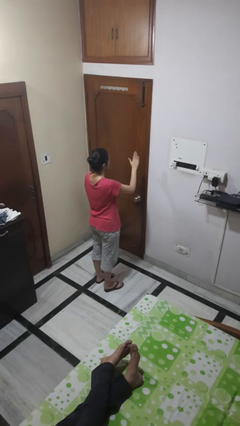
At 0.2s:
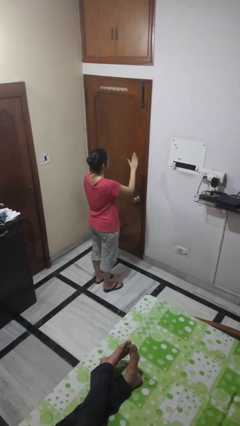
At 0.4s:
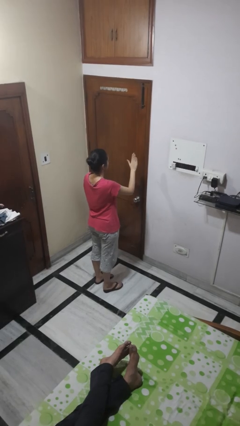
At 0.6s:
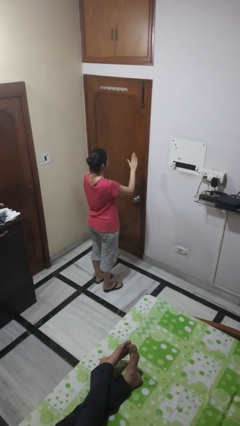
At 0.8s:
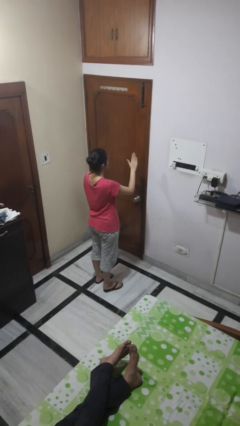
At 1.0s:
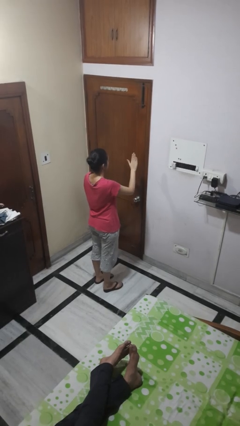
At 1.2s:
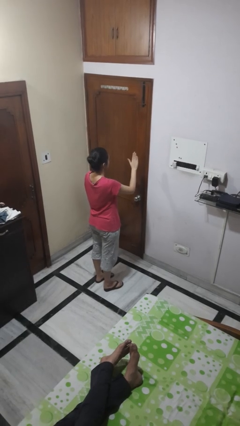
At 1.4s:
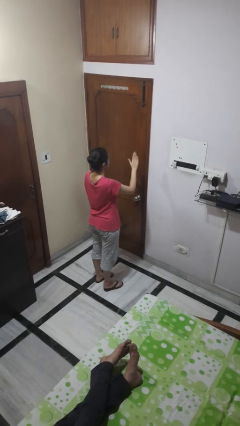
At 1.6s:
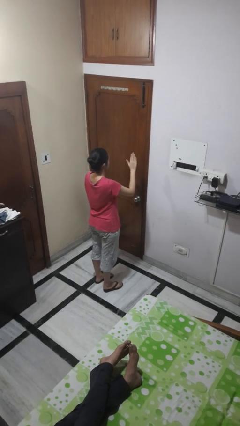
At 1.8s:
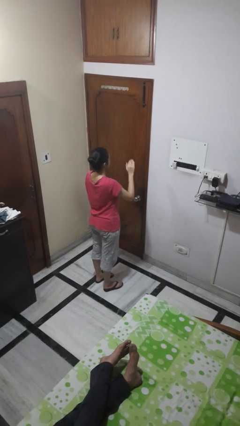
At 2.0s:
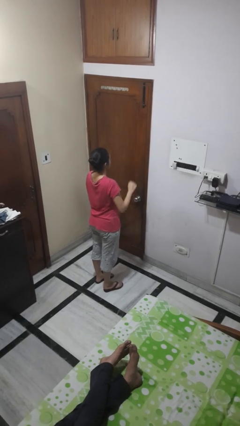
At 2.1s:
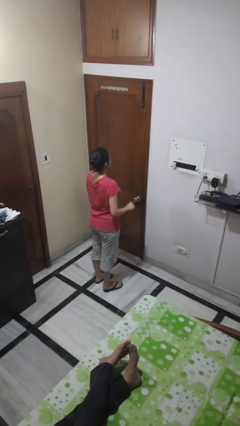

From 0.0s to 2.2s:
person gestures stop

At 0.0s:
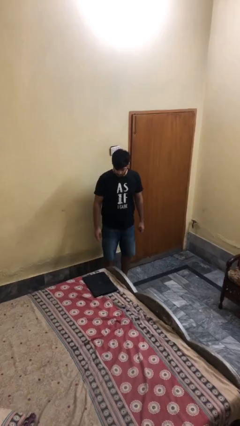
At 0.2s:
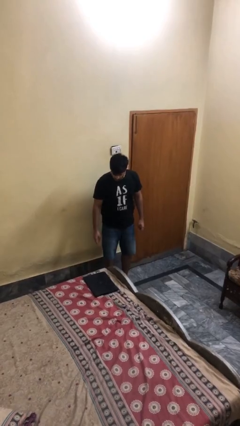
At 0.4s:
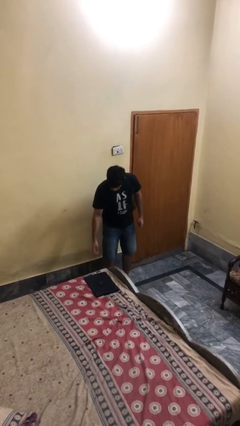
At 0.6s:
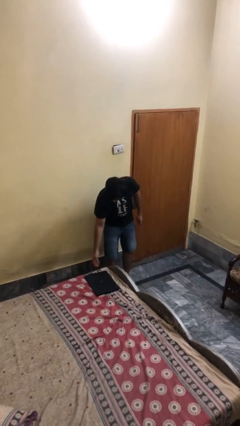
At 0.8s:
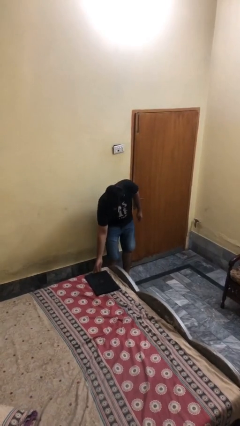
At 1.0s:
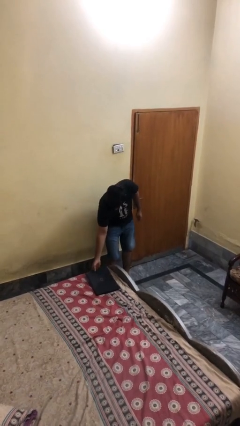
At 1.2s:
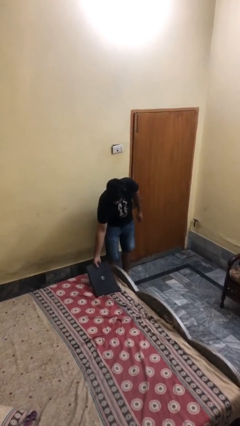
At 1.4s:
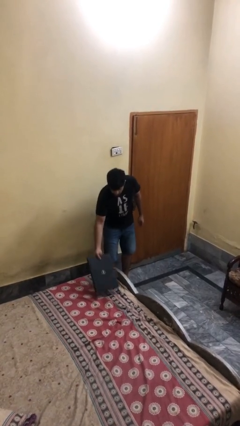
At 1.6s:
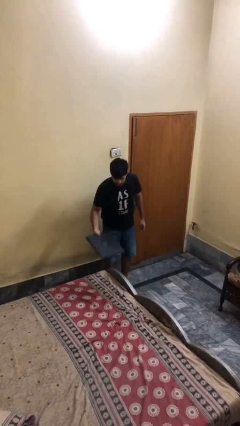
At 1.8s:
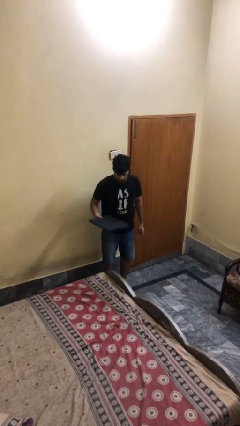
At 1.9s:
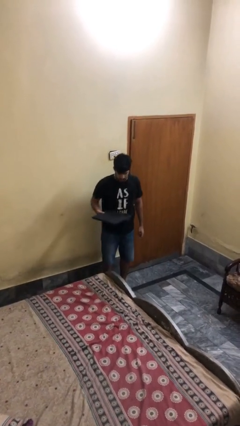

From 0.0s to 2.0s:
person picks up object from bed

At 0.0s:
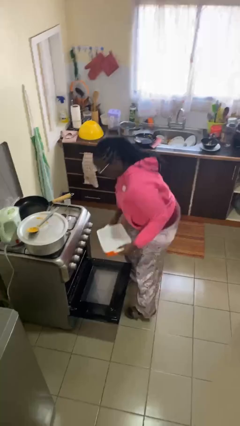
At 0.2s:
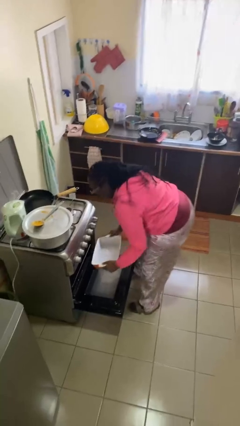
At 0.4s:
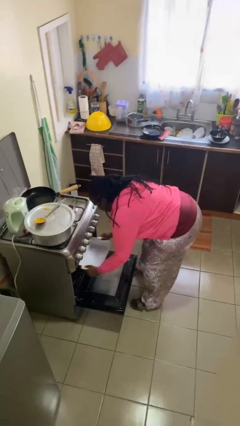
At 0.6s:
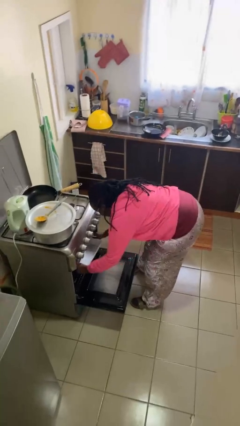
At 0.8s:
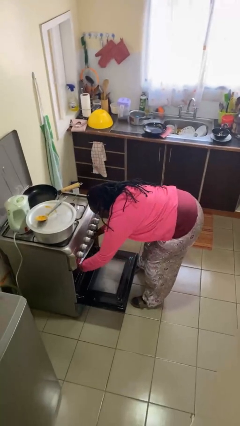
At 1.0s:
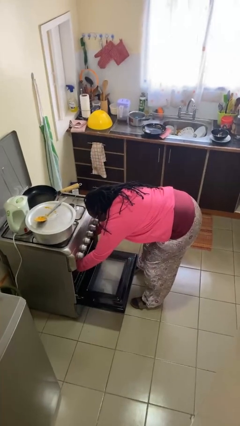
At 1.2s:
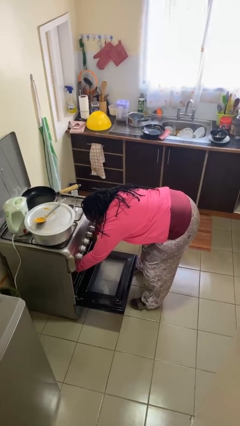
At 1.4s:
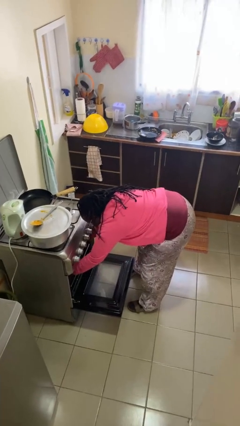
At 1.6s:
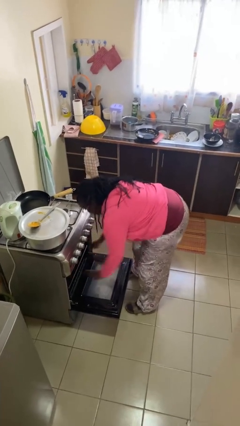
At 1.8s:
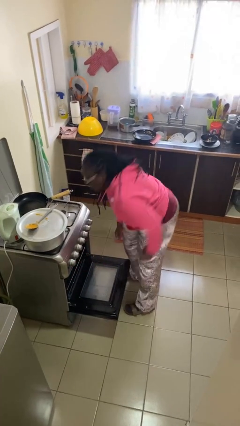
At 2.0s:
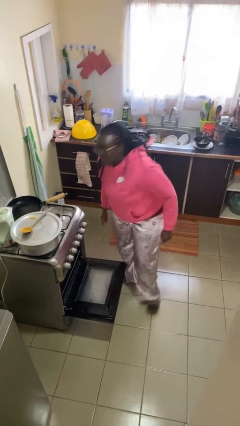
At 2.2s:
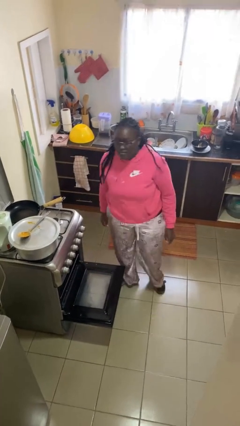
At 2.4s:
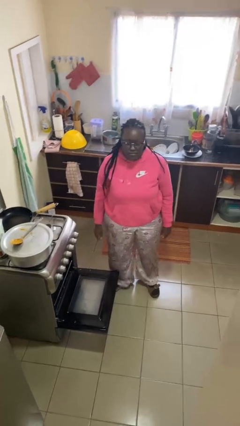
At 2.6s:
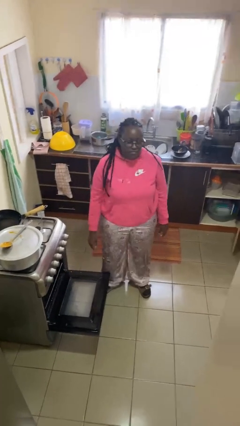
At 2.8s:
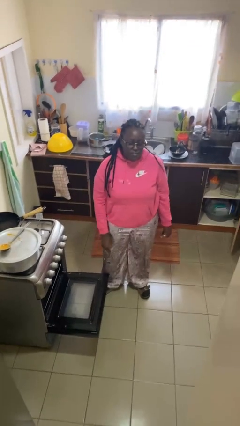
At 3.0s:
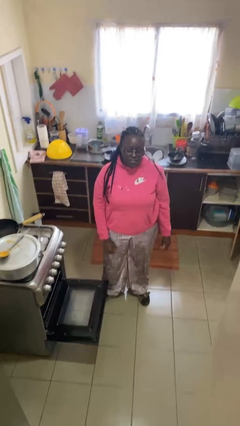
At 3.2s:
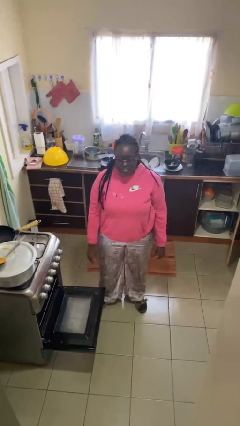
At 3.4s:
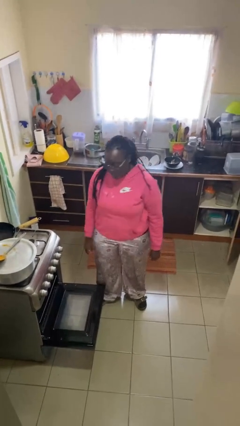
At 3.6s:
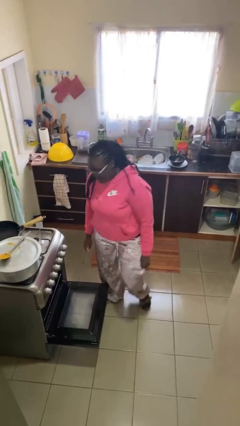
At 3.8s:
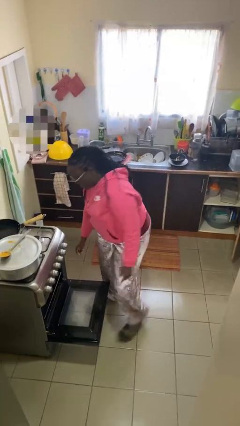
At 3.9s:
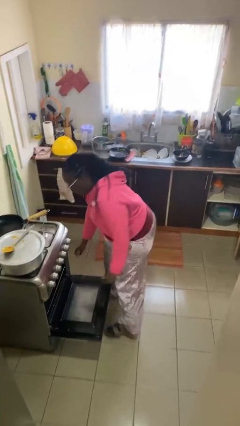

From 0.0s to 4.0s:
person puts object into oven

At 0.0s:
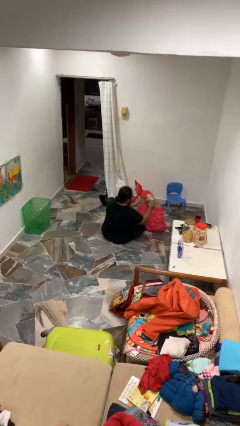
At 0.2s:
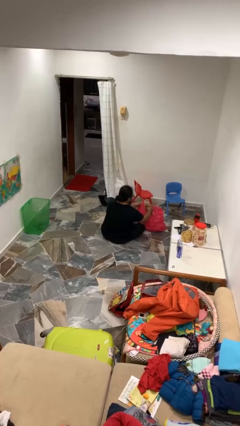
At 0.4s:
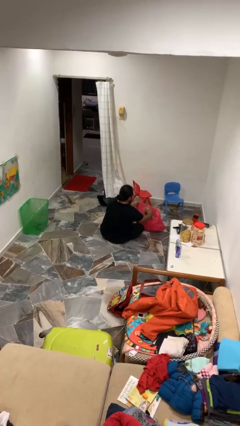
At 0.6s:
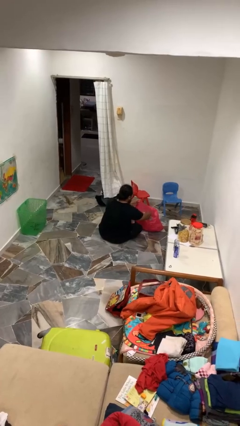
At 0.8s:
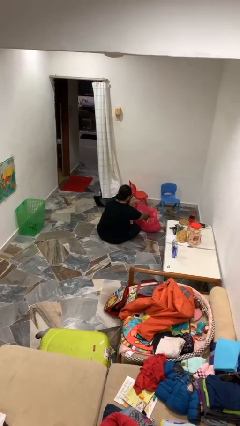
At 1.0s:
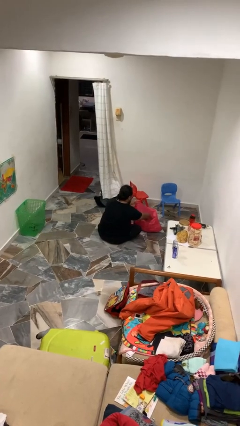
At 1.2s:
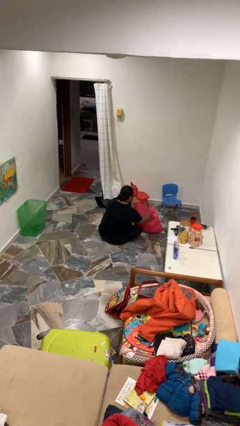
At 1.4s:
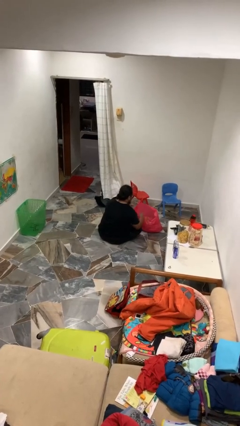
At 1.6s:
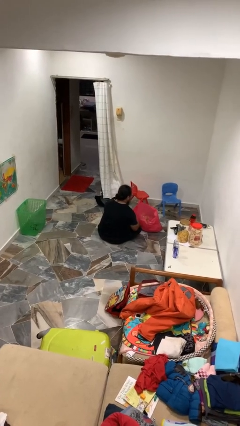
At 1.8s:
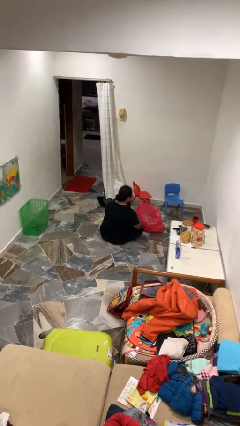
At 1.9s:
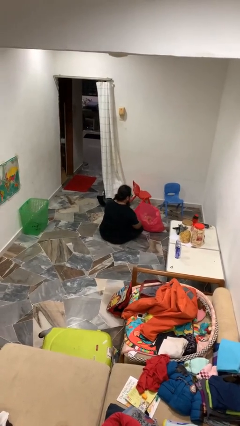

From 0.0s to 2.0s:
person puts object into bag

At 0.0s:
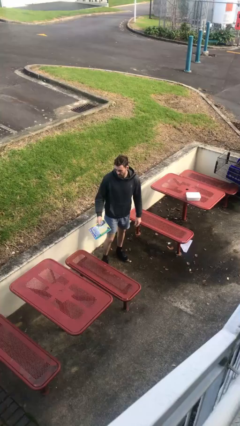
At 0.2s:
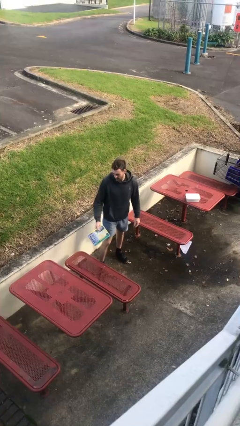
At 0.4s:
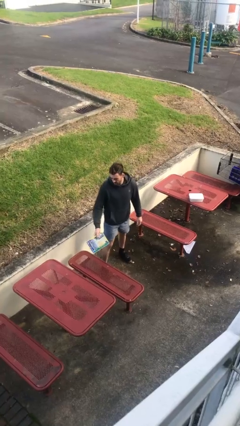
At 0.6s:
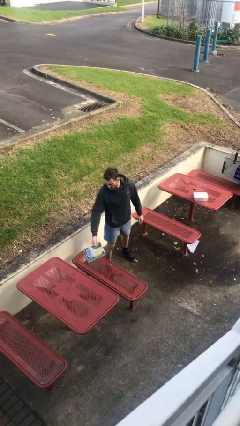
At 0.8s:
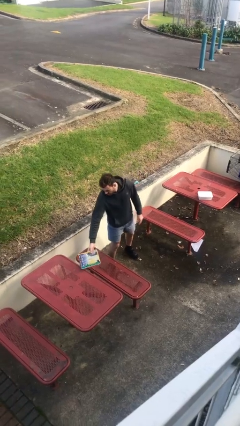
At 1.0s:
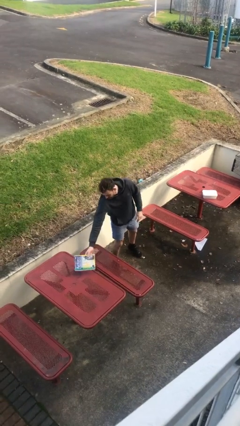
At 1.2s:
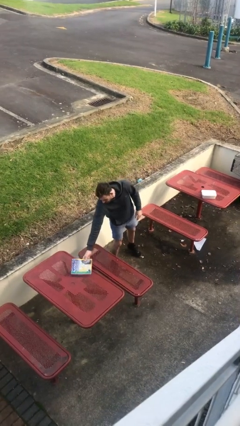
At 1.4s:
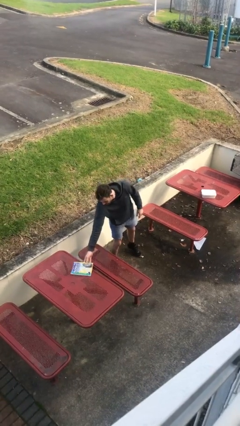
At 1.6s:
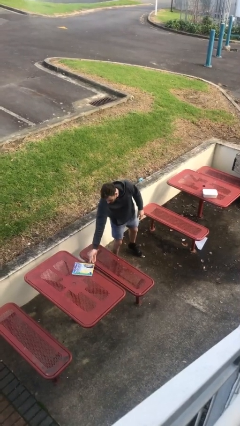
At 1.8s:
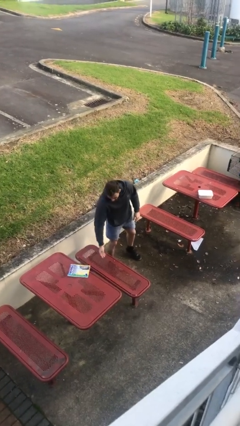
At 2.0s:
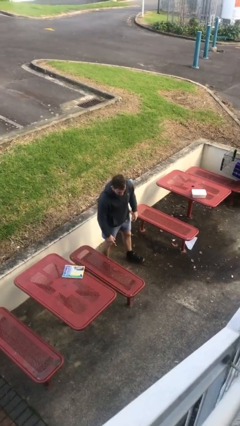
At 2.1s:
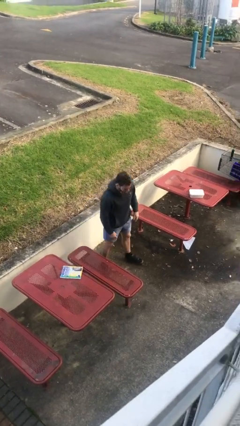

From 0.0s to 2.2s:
person puts down object on table

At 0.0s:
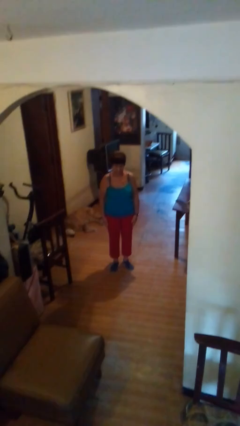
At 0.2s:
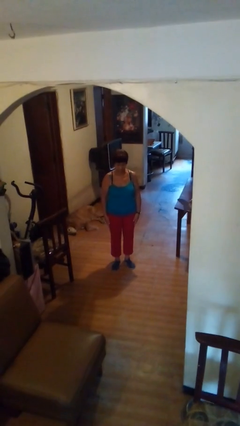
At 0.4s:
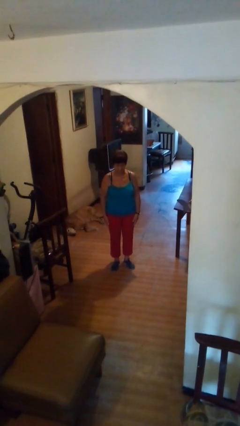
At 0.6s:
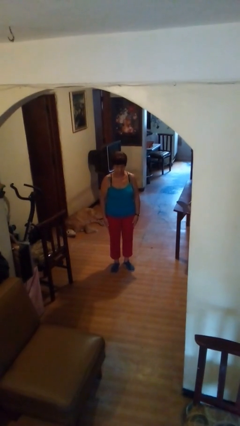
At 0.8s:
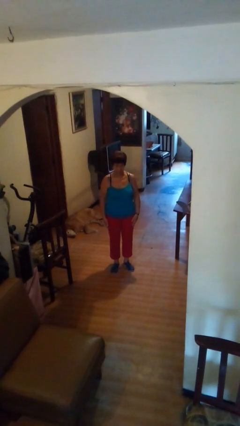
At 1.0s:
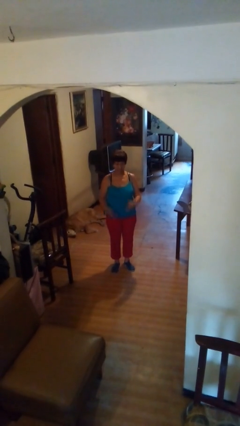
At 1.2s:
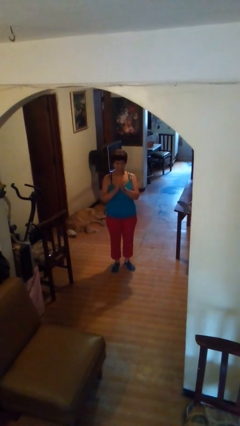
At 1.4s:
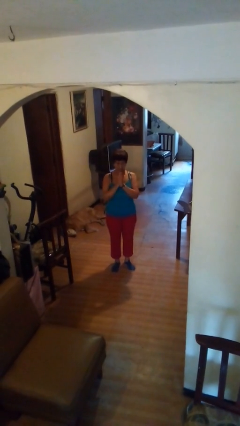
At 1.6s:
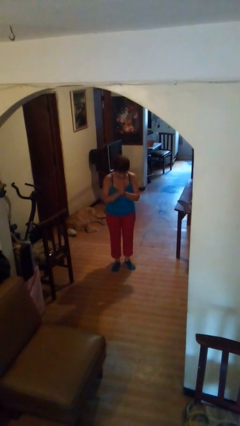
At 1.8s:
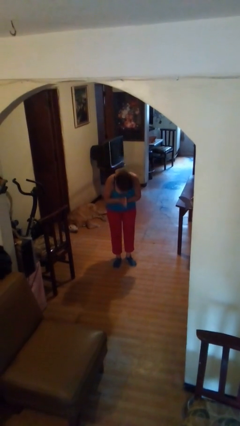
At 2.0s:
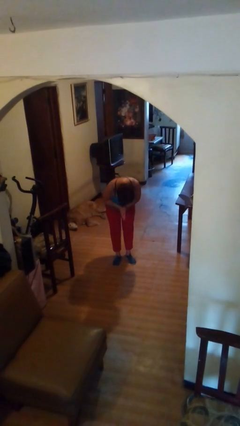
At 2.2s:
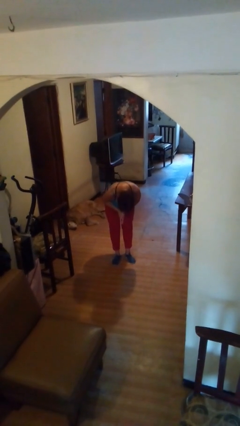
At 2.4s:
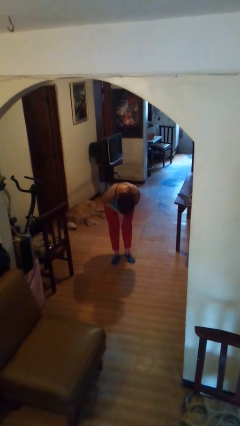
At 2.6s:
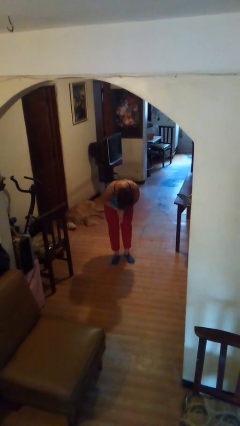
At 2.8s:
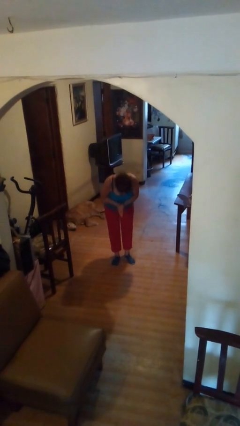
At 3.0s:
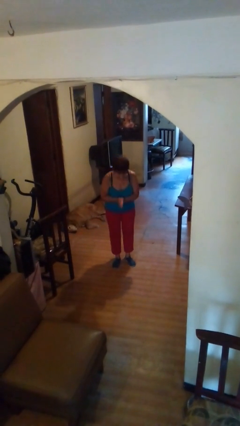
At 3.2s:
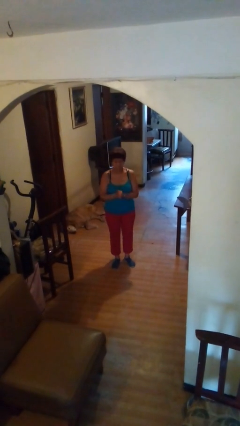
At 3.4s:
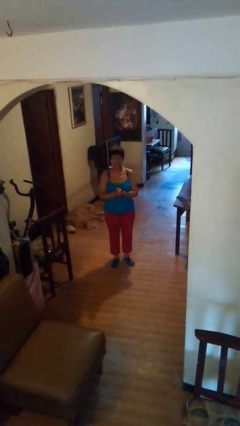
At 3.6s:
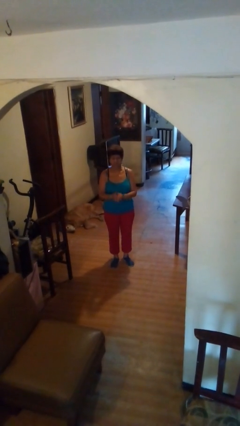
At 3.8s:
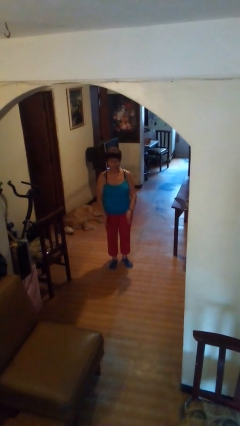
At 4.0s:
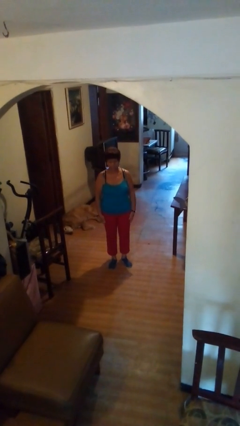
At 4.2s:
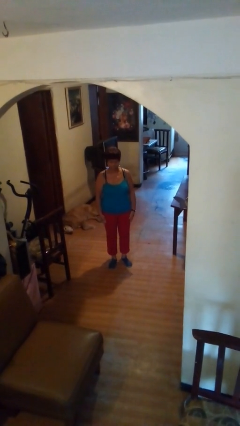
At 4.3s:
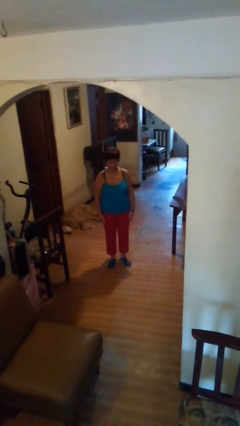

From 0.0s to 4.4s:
person bows

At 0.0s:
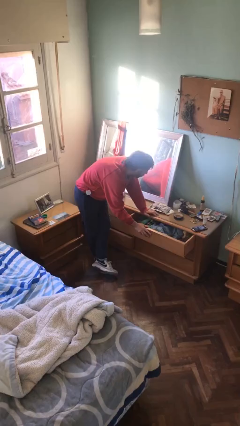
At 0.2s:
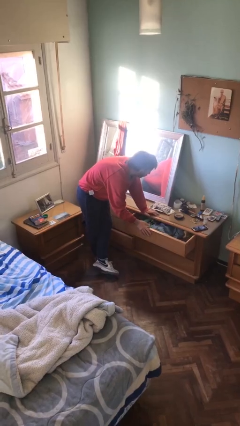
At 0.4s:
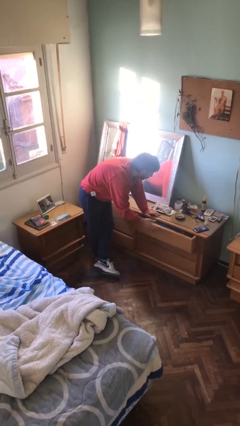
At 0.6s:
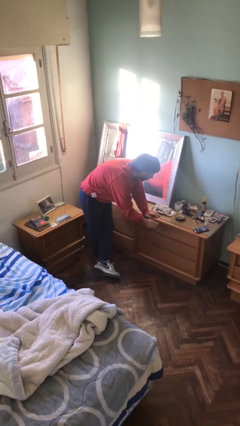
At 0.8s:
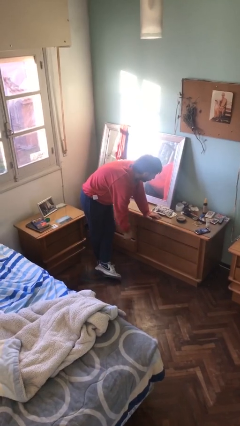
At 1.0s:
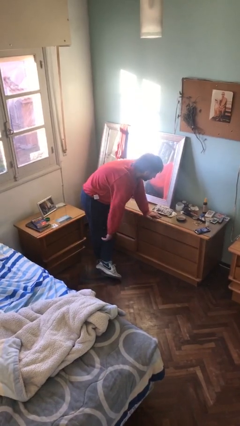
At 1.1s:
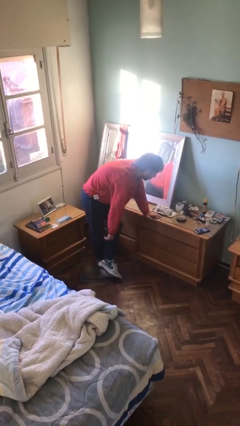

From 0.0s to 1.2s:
person closes dresser drawer
